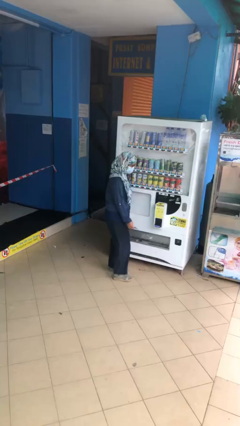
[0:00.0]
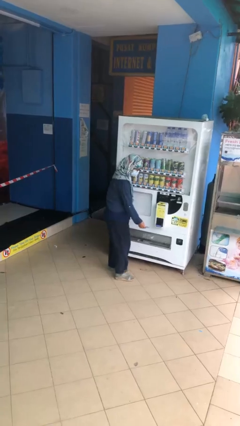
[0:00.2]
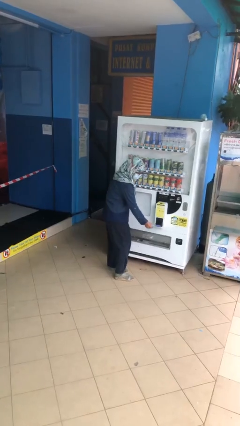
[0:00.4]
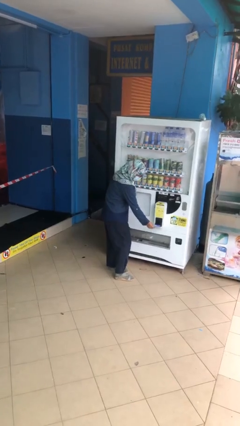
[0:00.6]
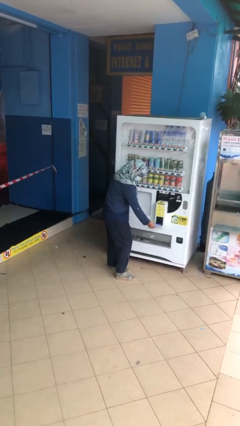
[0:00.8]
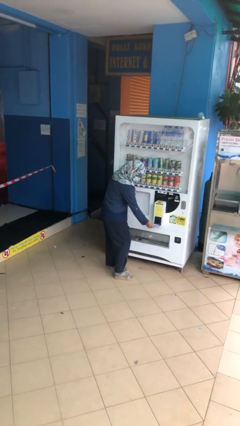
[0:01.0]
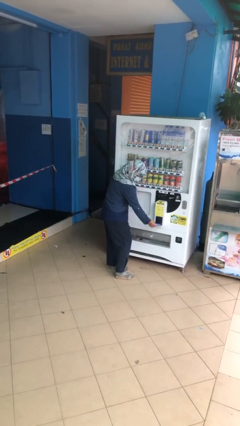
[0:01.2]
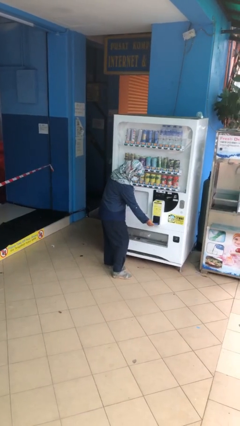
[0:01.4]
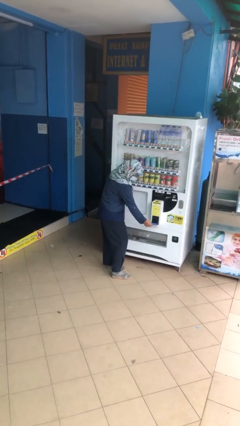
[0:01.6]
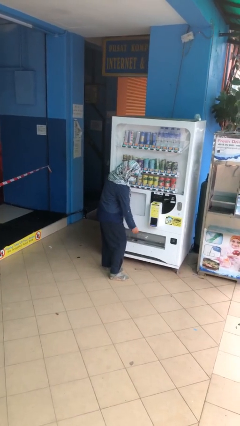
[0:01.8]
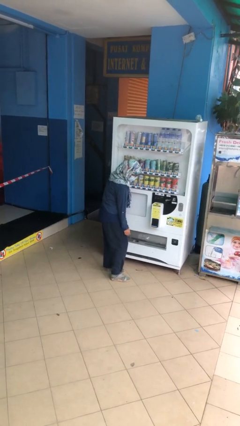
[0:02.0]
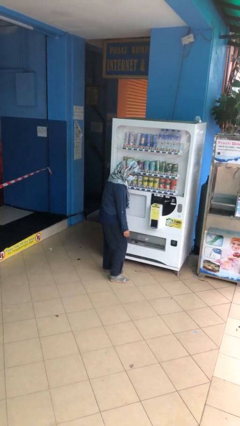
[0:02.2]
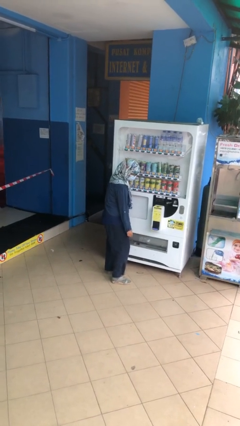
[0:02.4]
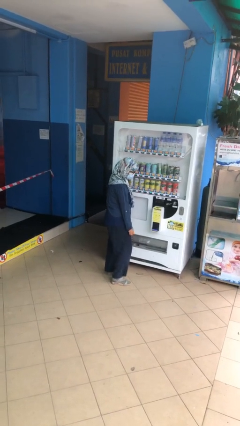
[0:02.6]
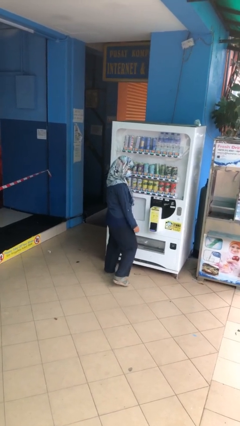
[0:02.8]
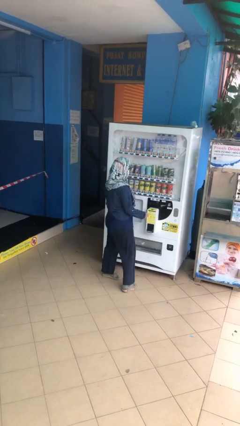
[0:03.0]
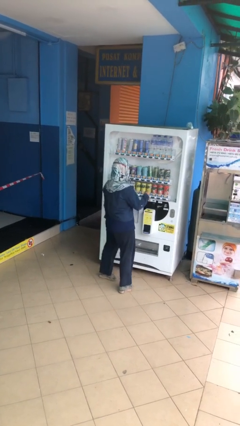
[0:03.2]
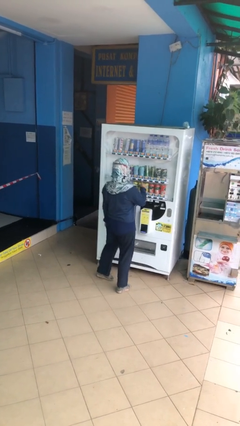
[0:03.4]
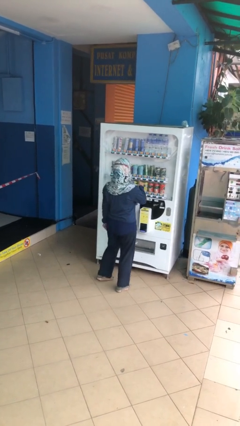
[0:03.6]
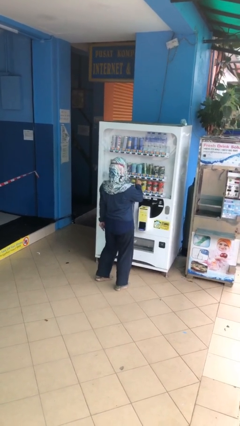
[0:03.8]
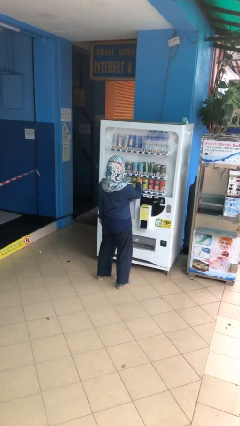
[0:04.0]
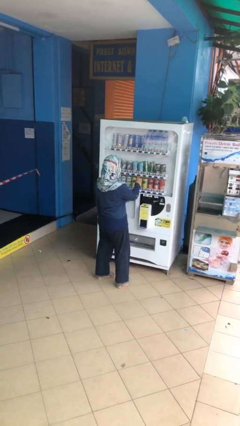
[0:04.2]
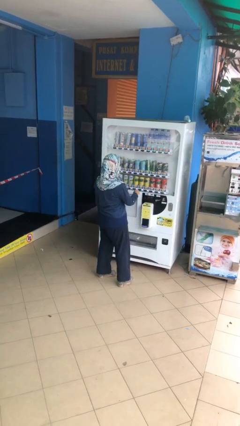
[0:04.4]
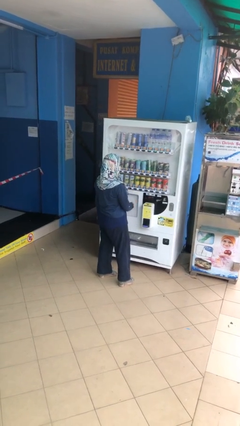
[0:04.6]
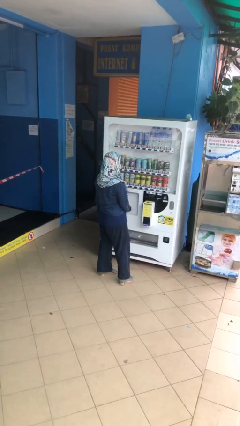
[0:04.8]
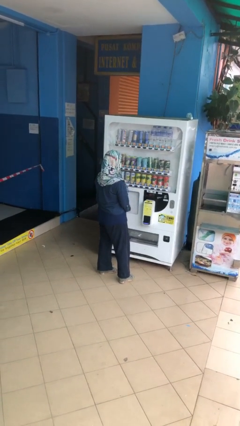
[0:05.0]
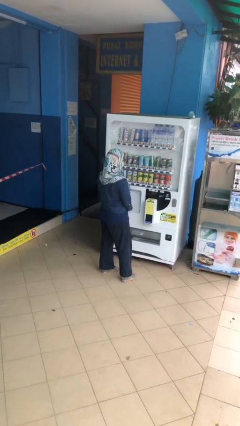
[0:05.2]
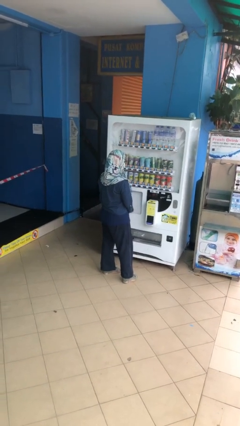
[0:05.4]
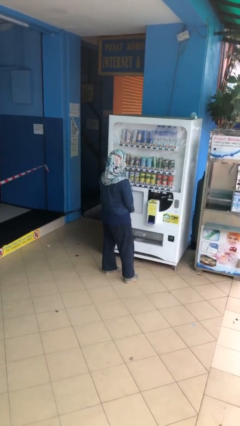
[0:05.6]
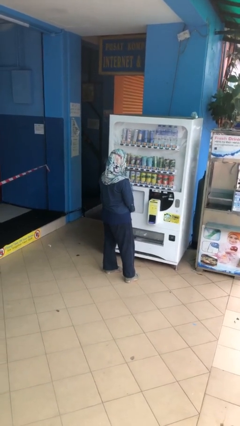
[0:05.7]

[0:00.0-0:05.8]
person purchases from machine

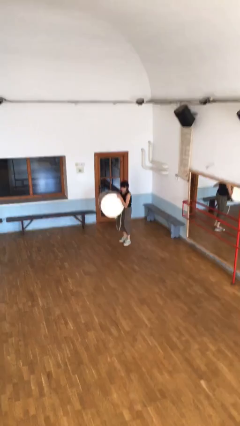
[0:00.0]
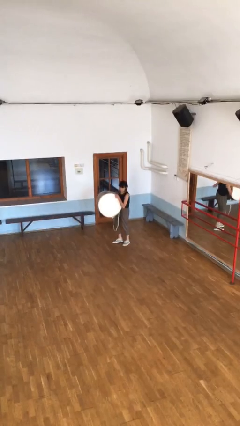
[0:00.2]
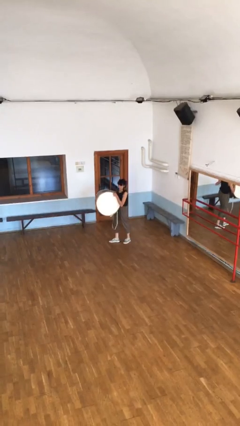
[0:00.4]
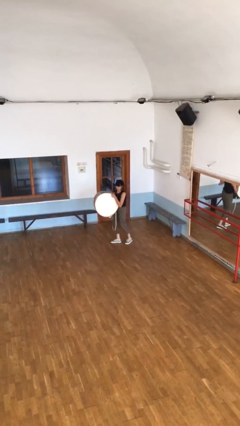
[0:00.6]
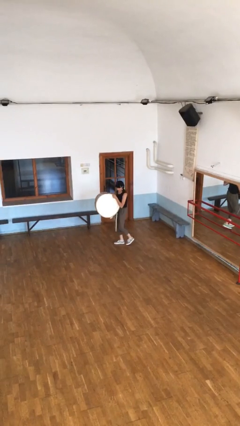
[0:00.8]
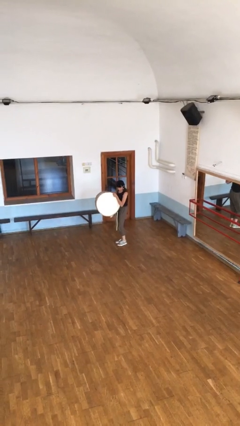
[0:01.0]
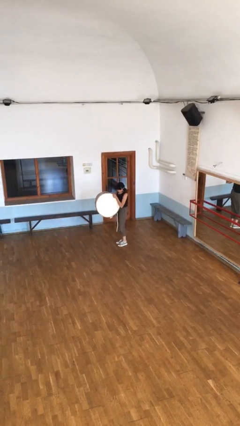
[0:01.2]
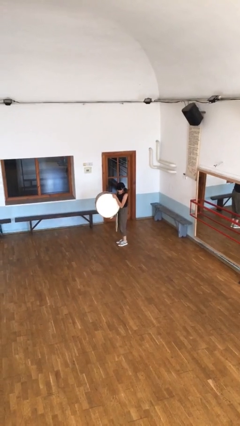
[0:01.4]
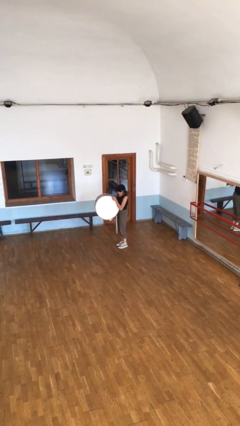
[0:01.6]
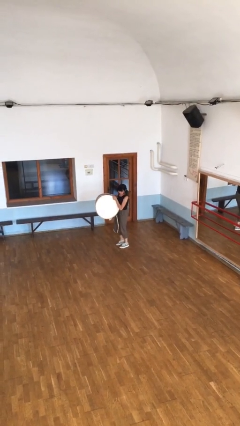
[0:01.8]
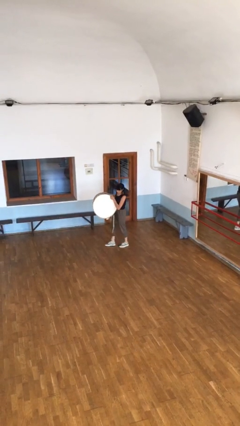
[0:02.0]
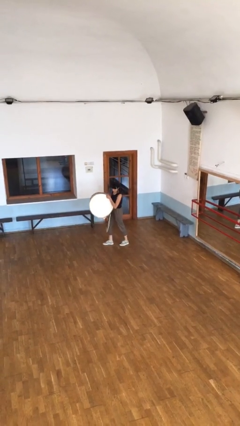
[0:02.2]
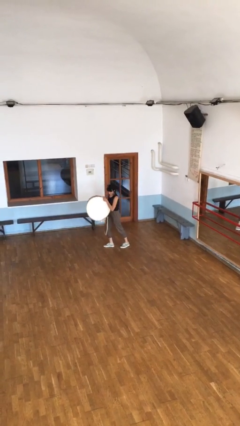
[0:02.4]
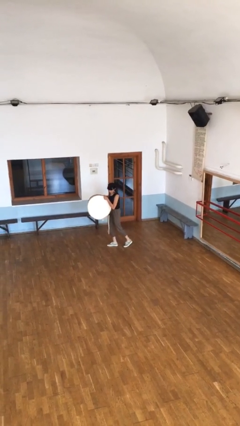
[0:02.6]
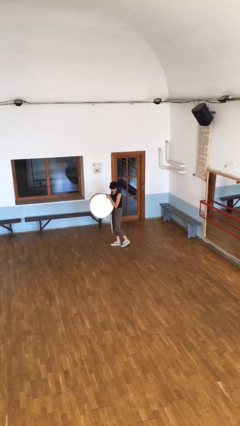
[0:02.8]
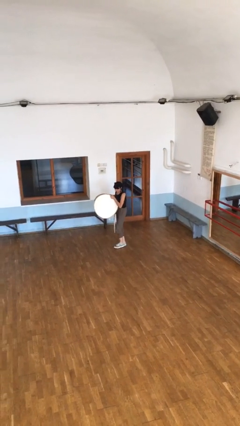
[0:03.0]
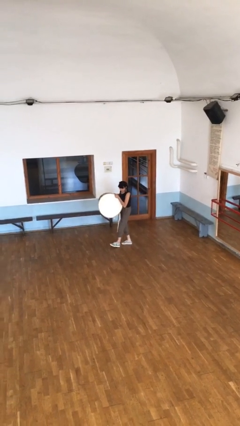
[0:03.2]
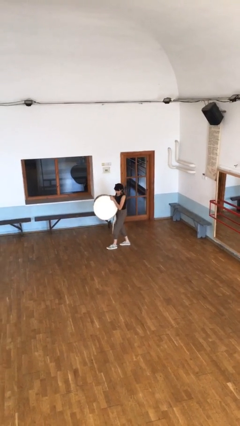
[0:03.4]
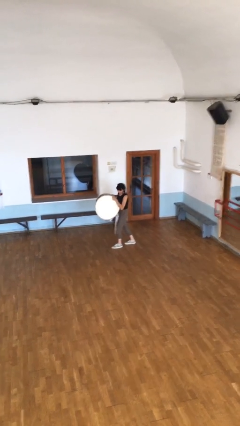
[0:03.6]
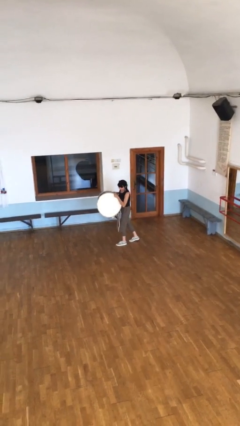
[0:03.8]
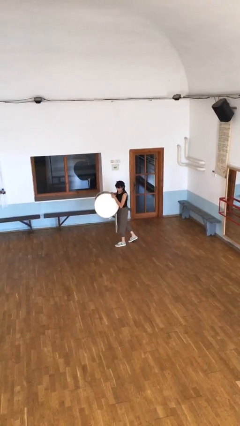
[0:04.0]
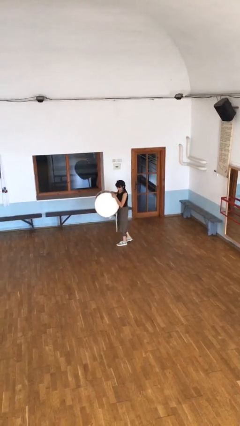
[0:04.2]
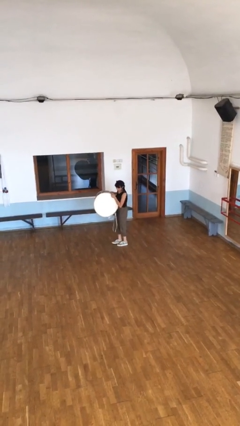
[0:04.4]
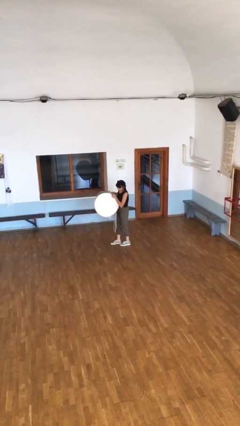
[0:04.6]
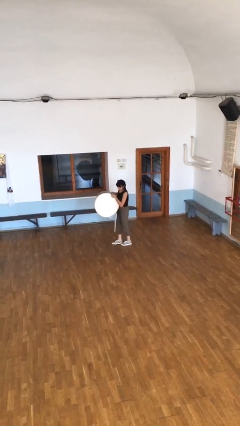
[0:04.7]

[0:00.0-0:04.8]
person carries heavy object

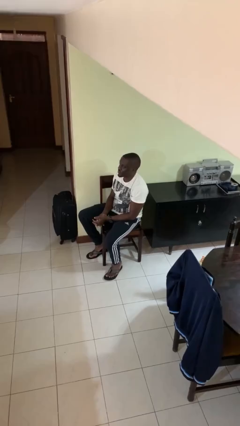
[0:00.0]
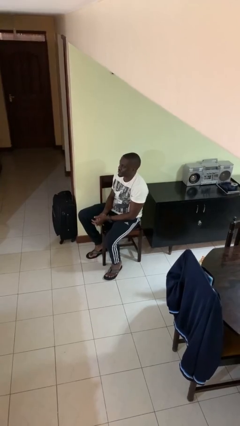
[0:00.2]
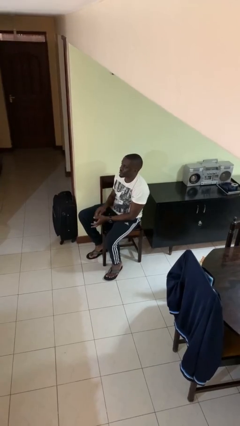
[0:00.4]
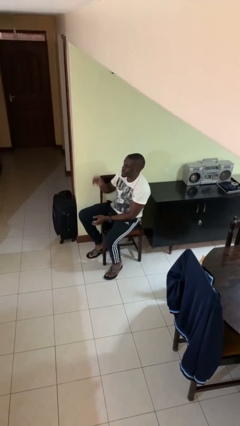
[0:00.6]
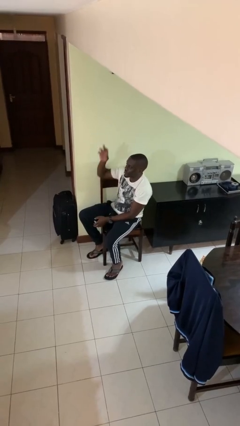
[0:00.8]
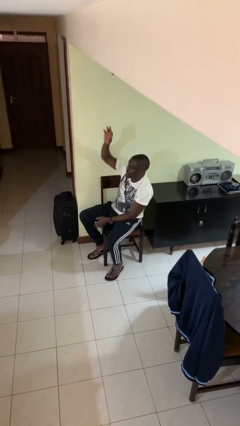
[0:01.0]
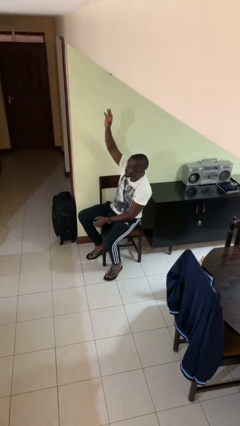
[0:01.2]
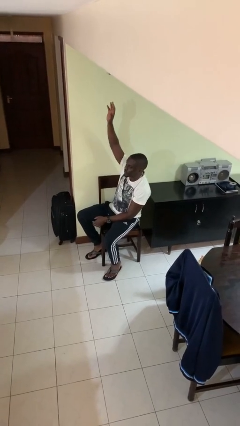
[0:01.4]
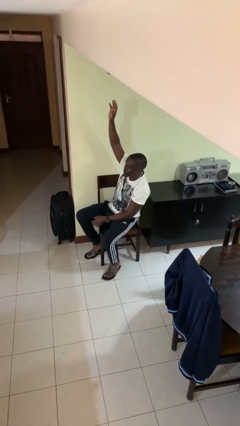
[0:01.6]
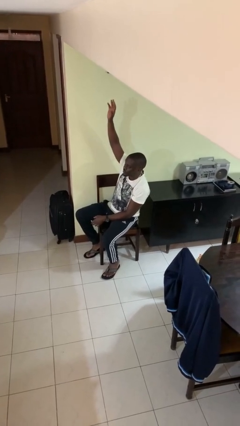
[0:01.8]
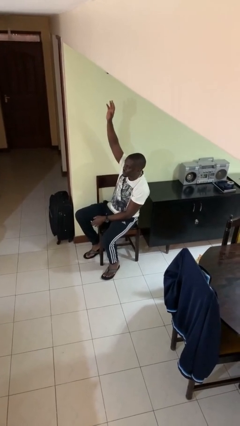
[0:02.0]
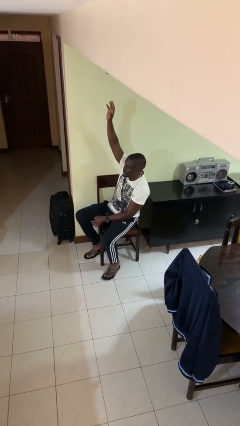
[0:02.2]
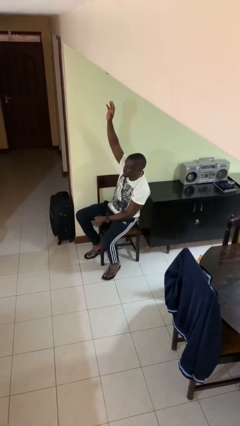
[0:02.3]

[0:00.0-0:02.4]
person gestures raise hand

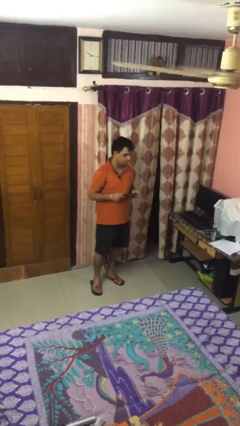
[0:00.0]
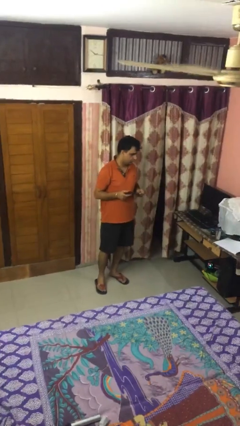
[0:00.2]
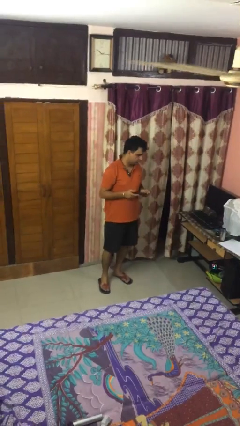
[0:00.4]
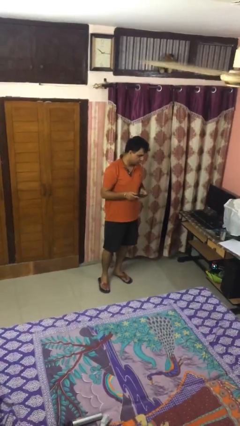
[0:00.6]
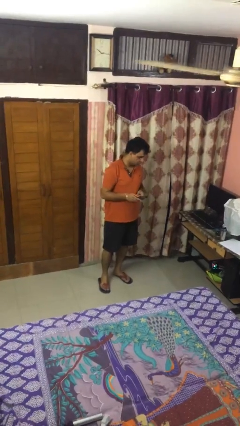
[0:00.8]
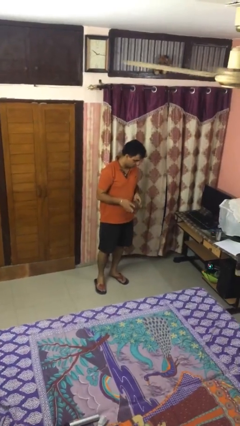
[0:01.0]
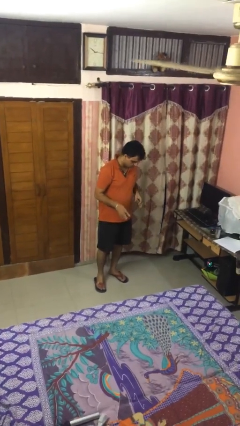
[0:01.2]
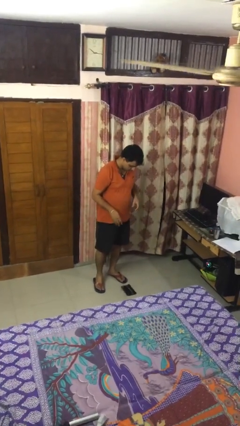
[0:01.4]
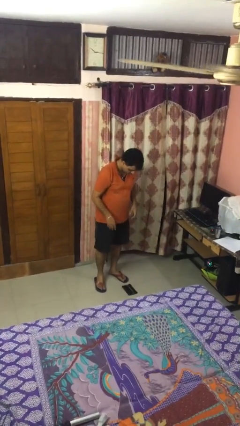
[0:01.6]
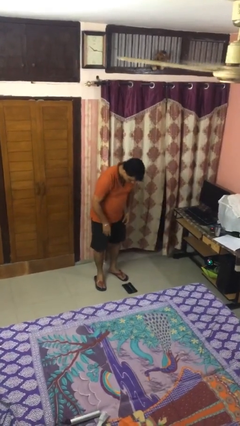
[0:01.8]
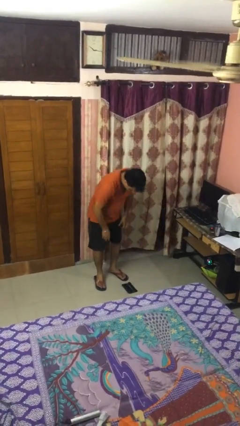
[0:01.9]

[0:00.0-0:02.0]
person drops object

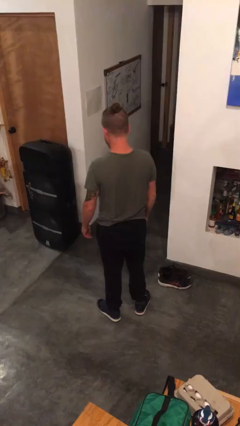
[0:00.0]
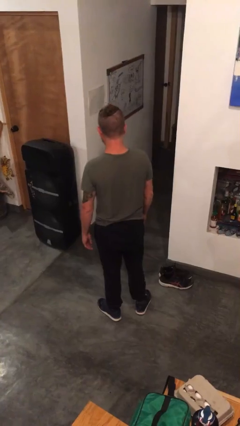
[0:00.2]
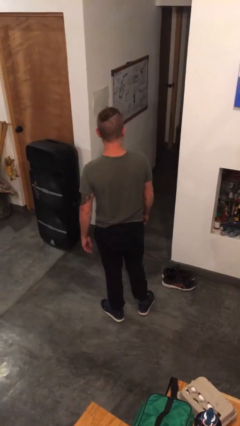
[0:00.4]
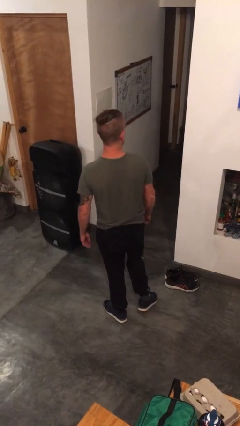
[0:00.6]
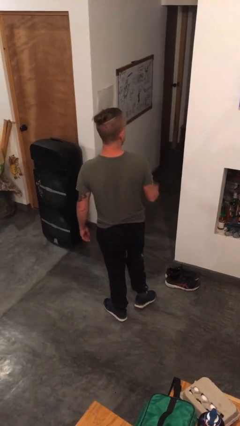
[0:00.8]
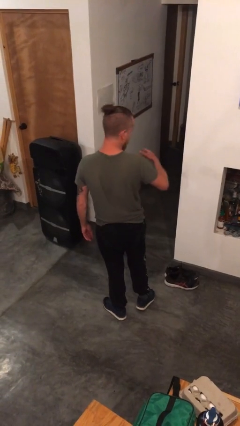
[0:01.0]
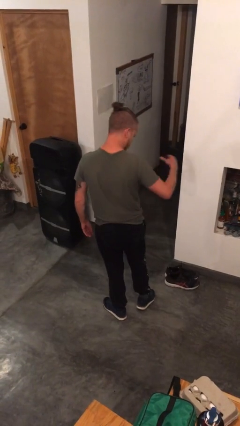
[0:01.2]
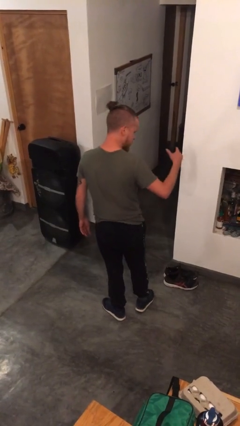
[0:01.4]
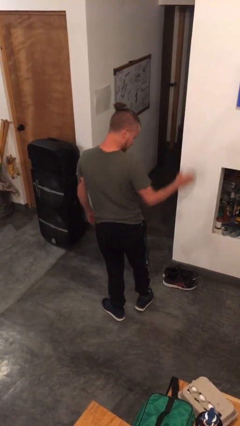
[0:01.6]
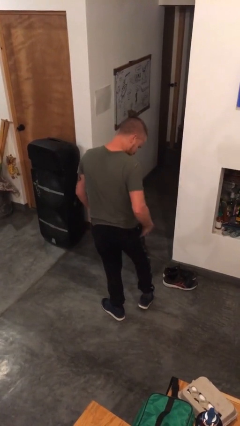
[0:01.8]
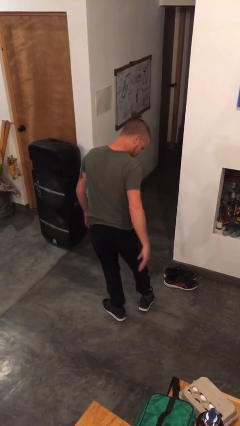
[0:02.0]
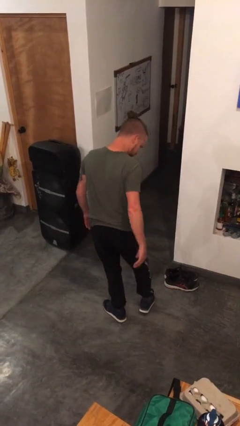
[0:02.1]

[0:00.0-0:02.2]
person swats bug

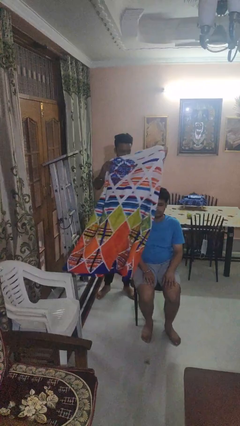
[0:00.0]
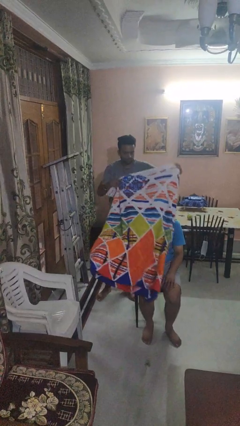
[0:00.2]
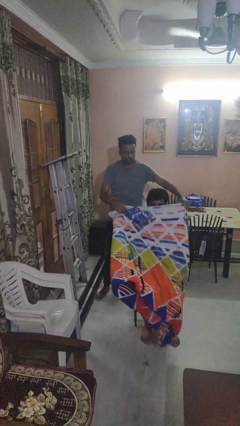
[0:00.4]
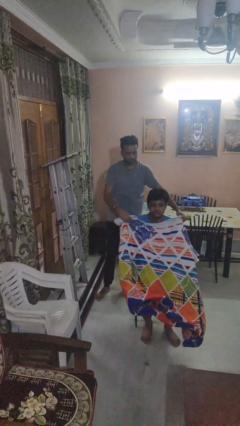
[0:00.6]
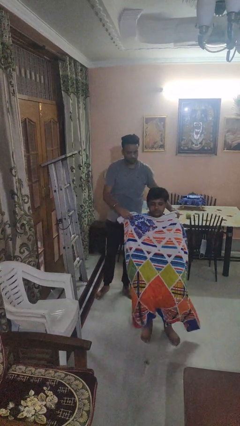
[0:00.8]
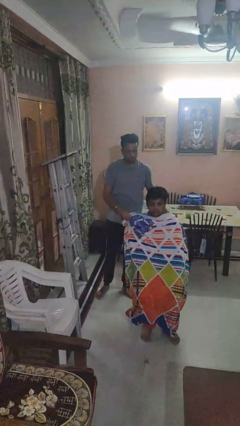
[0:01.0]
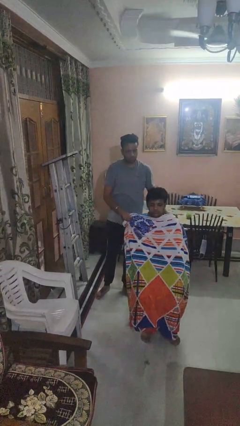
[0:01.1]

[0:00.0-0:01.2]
person covers friend with blanket
